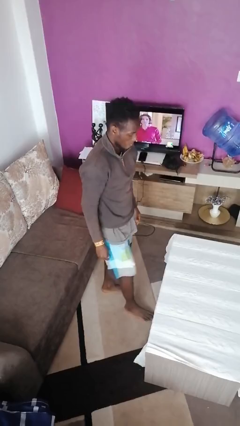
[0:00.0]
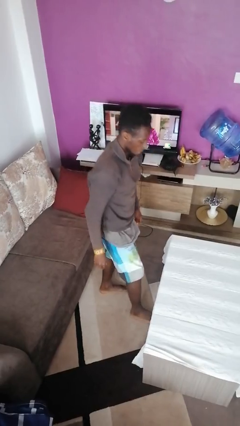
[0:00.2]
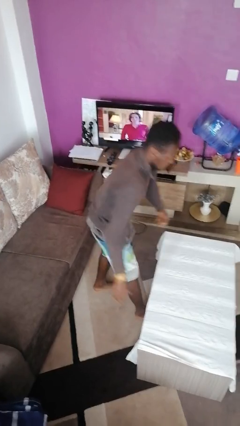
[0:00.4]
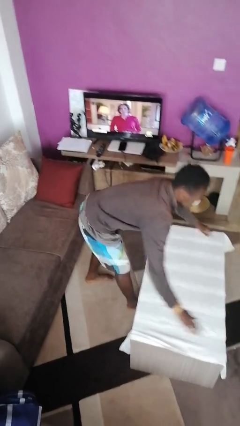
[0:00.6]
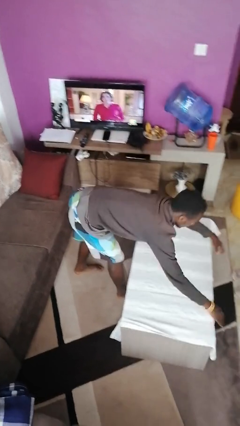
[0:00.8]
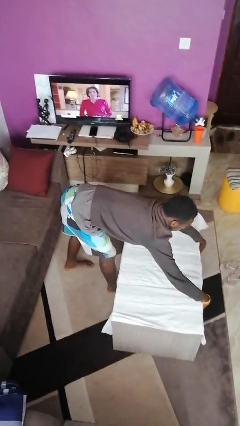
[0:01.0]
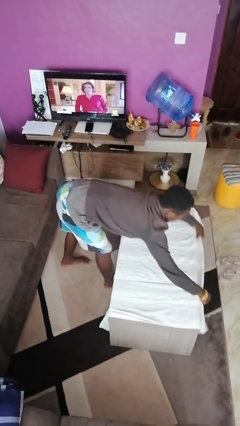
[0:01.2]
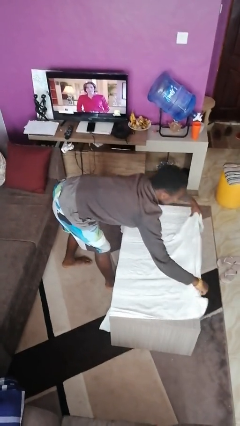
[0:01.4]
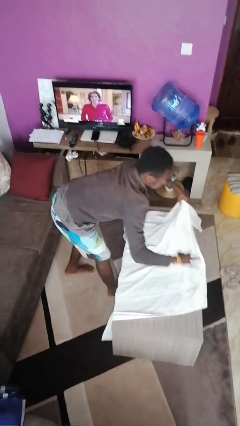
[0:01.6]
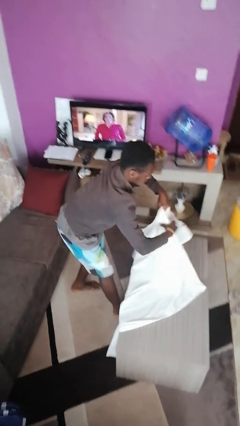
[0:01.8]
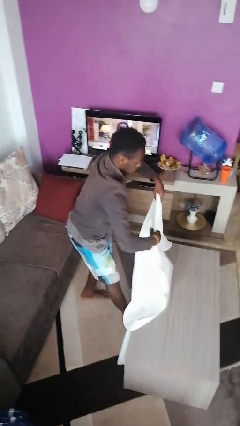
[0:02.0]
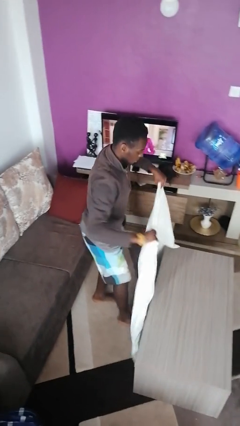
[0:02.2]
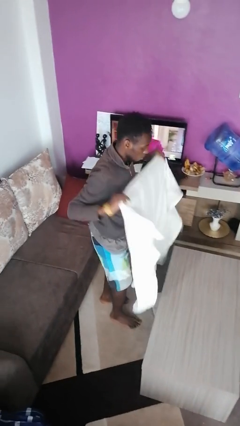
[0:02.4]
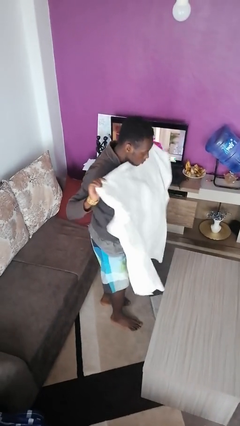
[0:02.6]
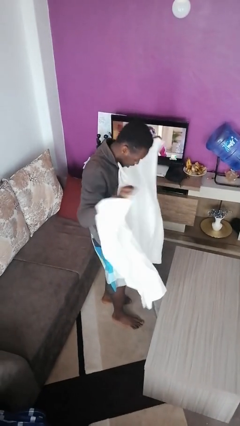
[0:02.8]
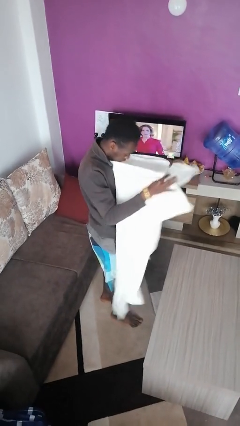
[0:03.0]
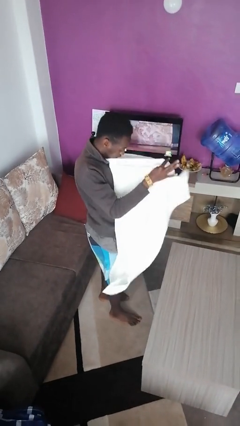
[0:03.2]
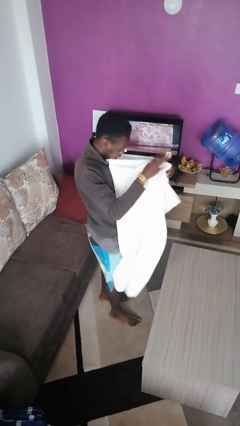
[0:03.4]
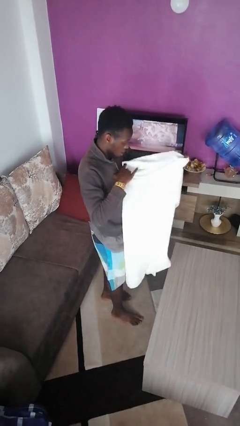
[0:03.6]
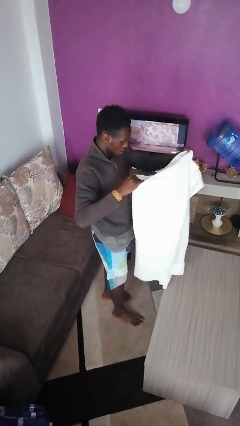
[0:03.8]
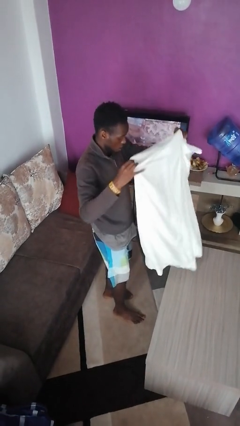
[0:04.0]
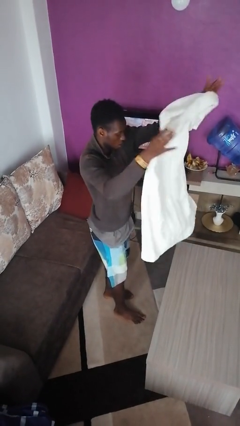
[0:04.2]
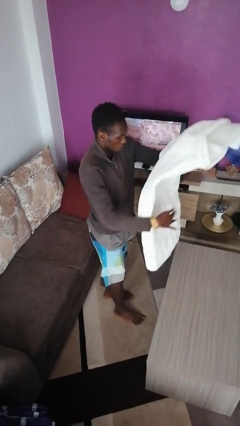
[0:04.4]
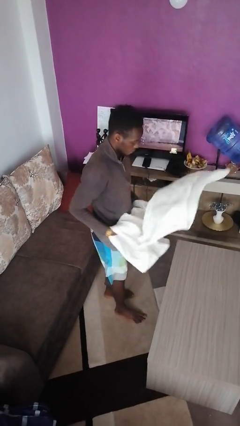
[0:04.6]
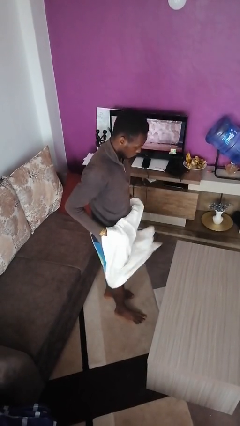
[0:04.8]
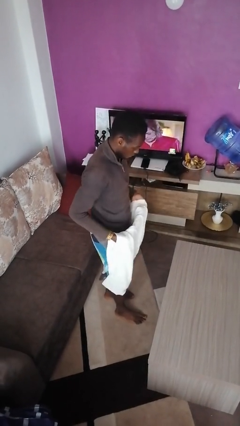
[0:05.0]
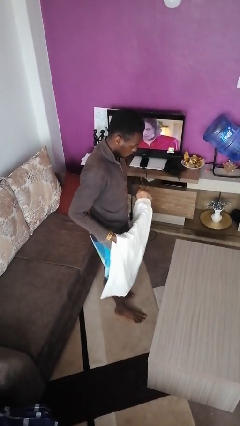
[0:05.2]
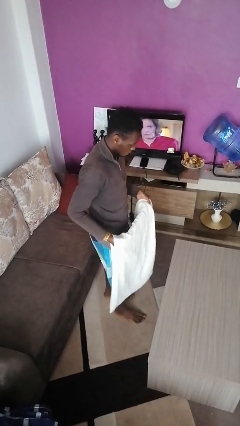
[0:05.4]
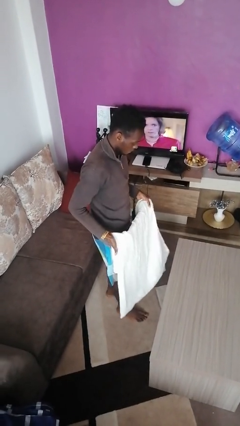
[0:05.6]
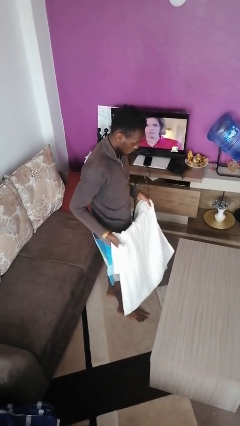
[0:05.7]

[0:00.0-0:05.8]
person folds tablecloth

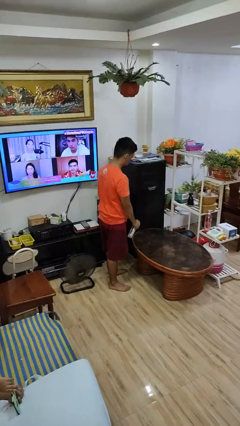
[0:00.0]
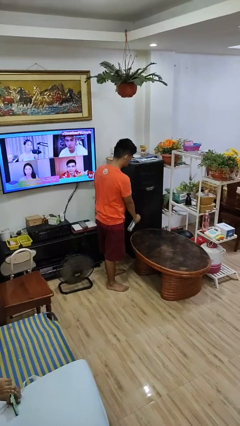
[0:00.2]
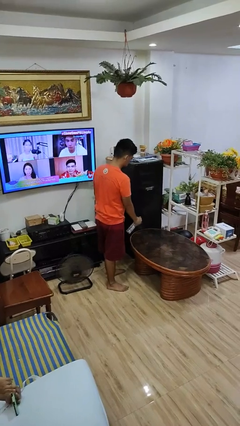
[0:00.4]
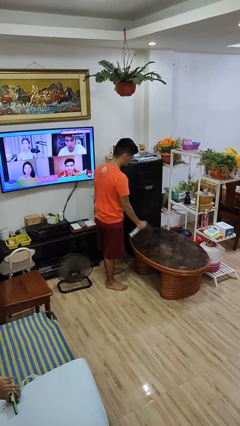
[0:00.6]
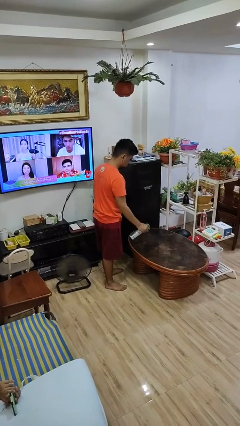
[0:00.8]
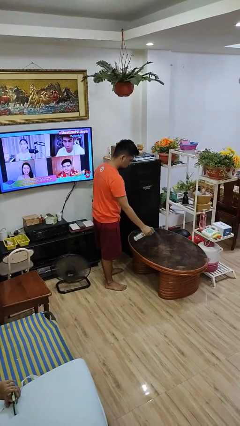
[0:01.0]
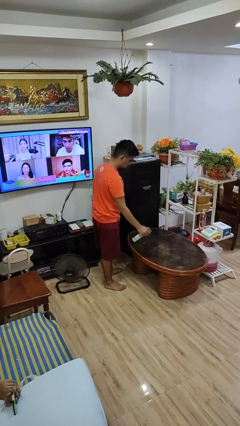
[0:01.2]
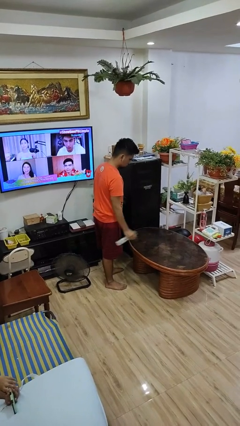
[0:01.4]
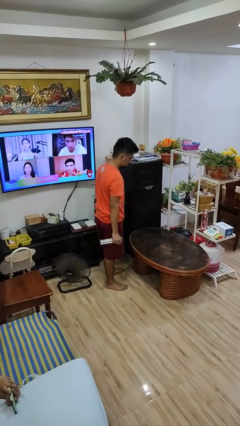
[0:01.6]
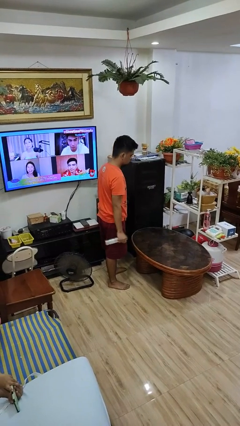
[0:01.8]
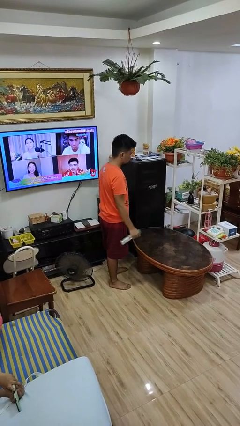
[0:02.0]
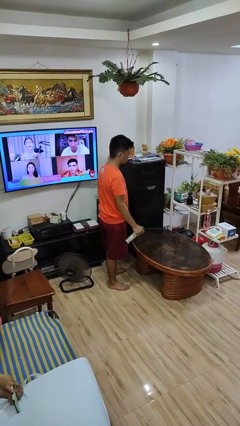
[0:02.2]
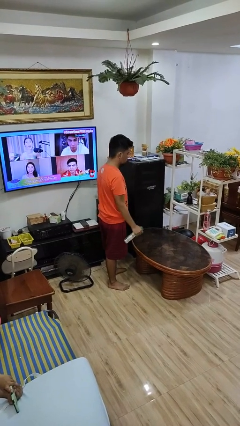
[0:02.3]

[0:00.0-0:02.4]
person sprays from bottle

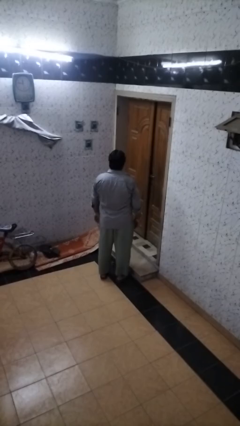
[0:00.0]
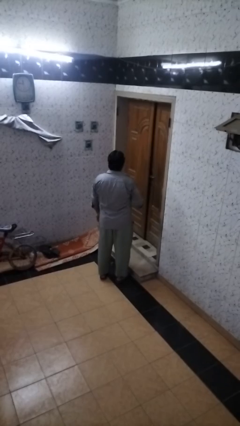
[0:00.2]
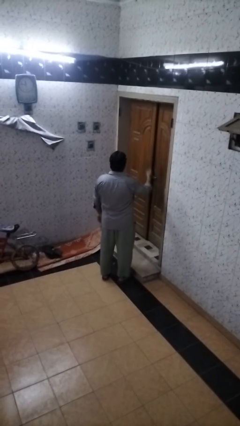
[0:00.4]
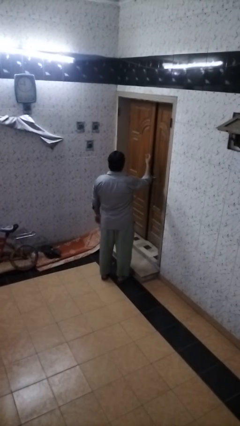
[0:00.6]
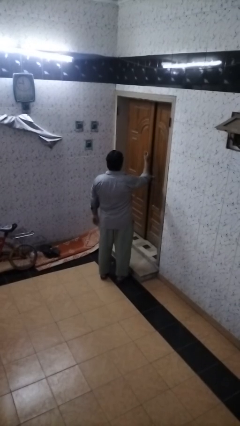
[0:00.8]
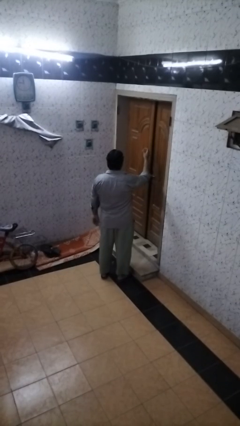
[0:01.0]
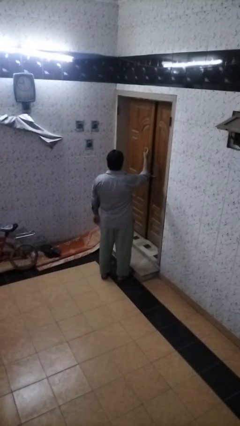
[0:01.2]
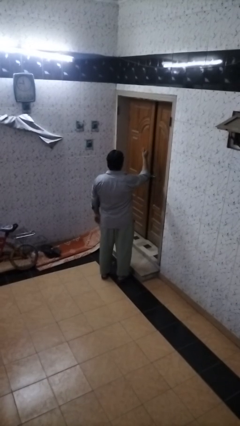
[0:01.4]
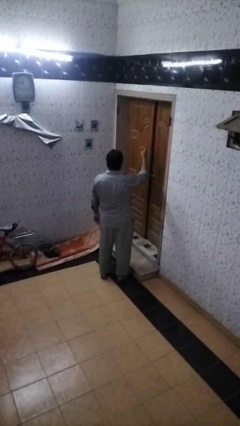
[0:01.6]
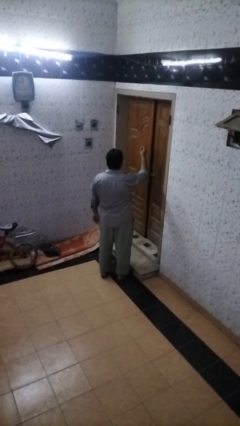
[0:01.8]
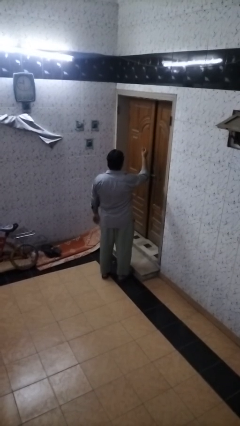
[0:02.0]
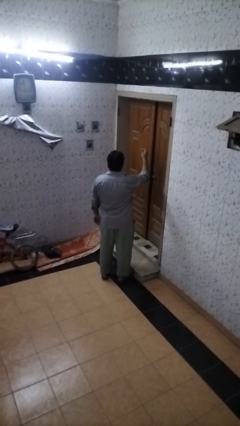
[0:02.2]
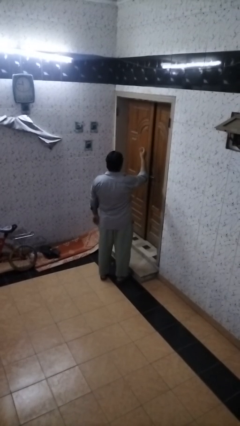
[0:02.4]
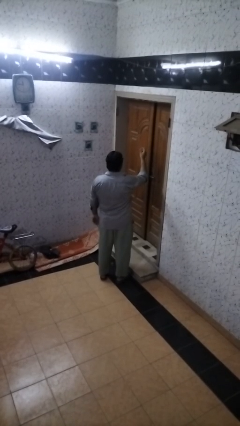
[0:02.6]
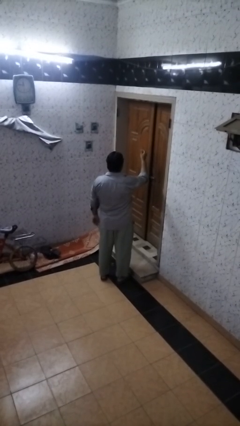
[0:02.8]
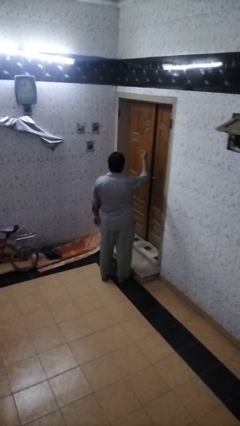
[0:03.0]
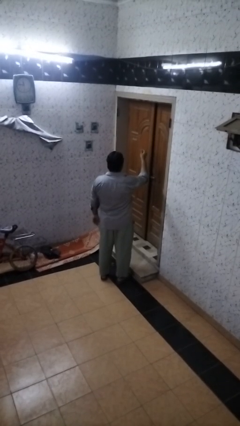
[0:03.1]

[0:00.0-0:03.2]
person snaps fingers

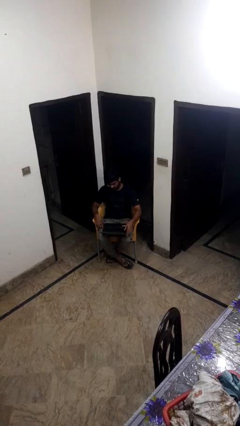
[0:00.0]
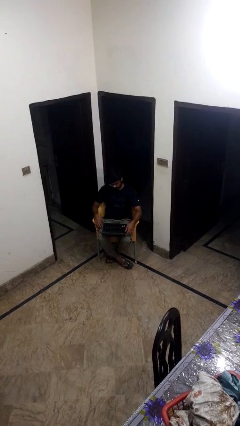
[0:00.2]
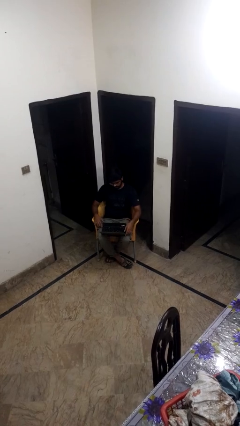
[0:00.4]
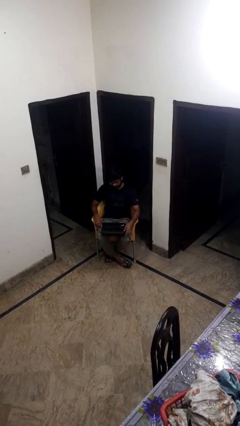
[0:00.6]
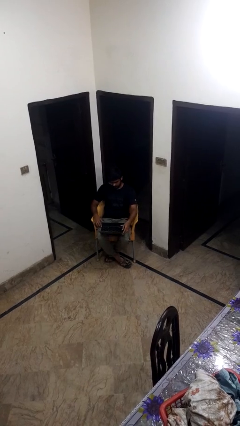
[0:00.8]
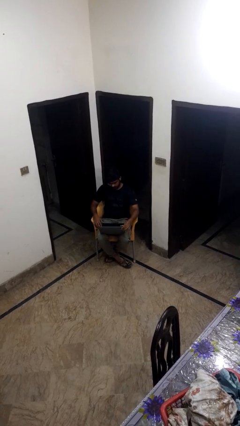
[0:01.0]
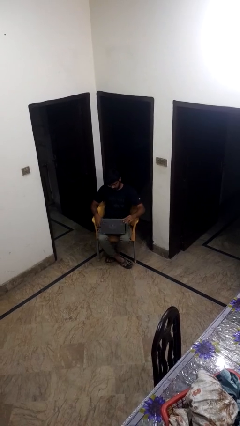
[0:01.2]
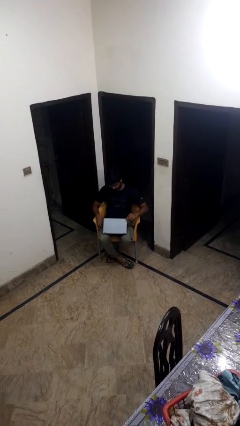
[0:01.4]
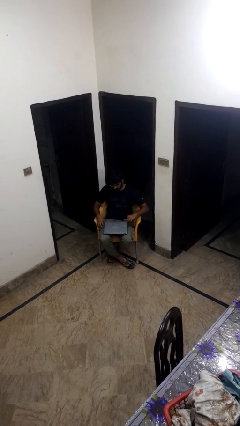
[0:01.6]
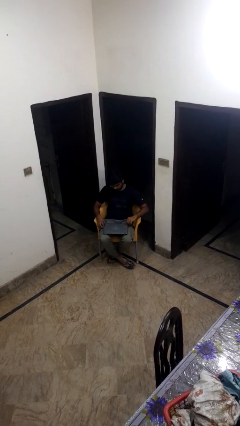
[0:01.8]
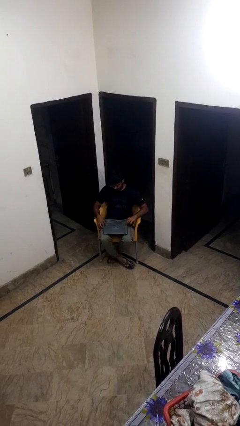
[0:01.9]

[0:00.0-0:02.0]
person closes laptop

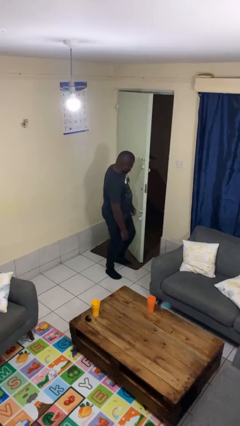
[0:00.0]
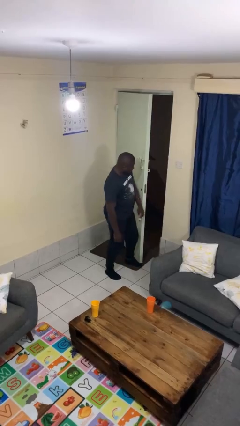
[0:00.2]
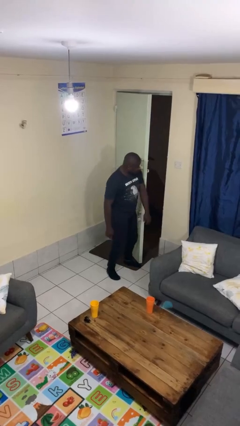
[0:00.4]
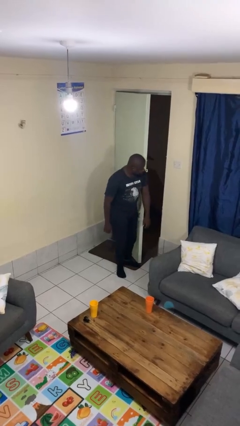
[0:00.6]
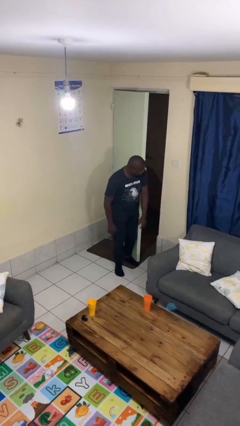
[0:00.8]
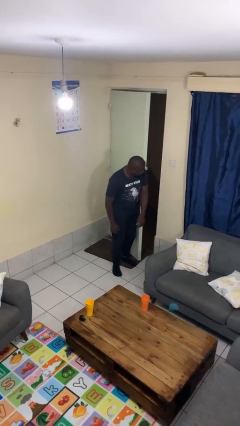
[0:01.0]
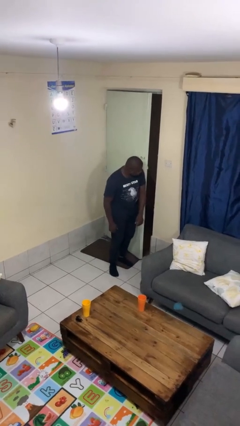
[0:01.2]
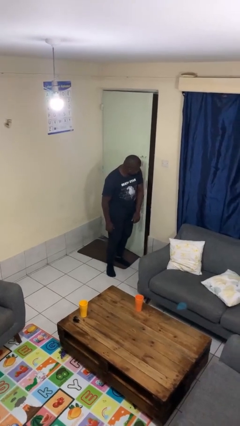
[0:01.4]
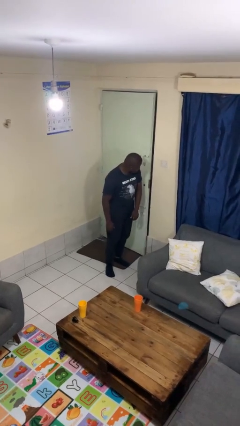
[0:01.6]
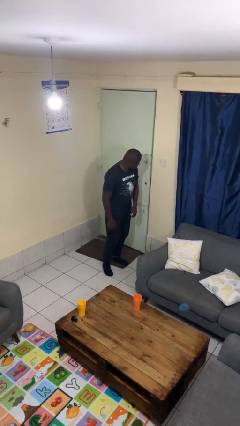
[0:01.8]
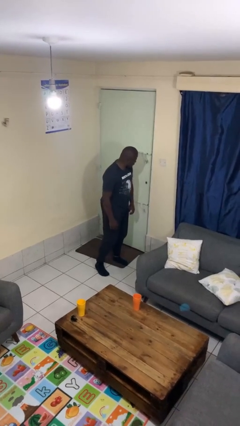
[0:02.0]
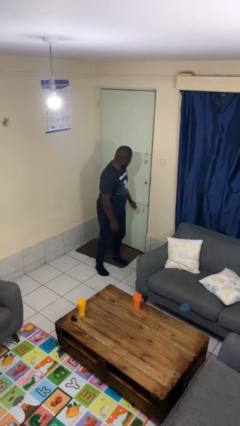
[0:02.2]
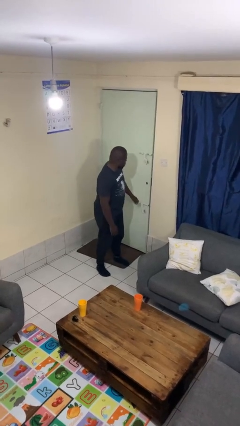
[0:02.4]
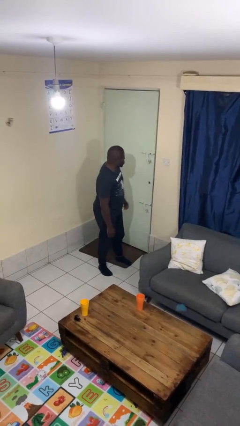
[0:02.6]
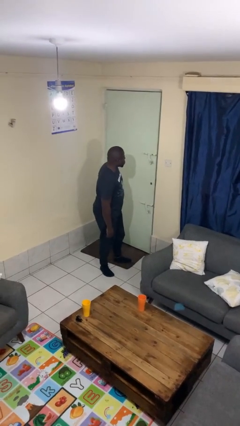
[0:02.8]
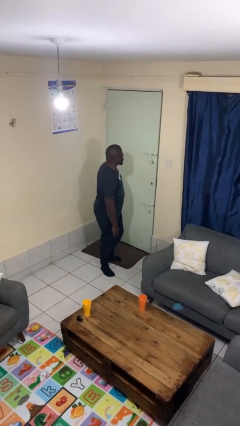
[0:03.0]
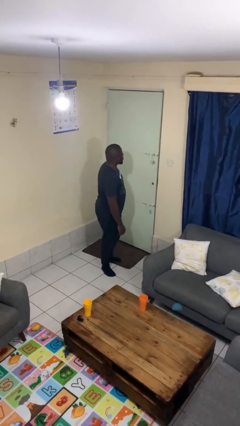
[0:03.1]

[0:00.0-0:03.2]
person closes door with hip

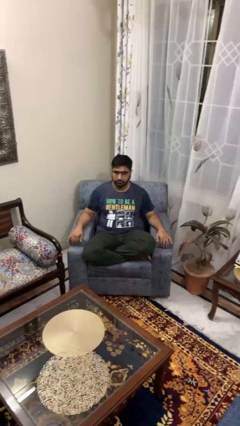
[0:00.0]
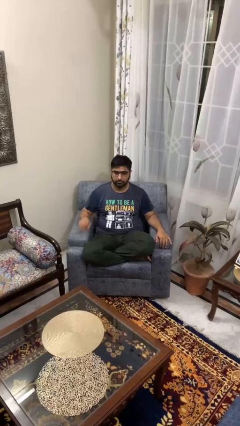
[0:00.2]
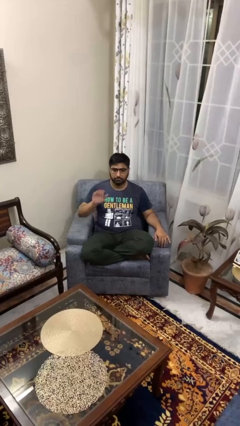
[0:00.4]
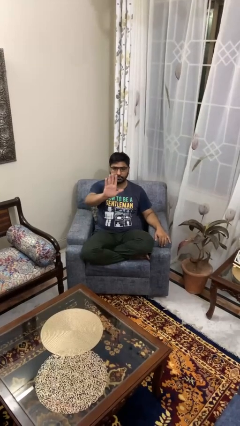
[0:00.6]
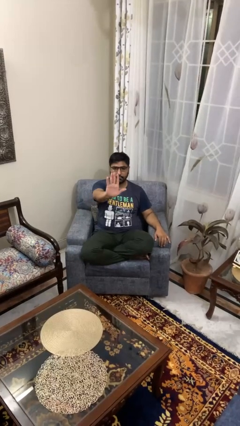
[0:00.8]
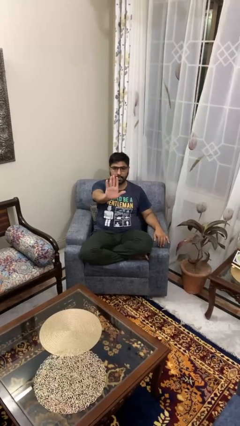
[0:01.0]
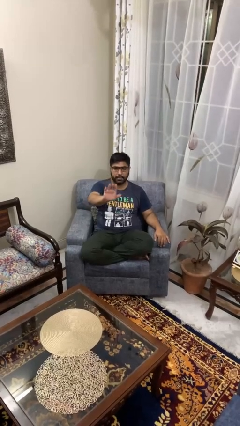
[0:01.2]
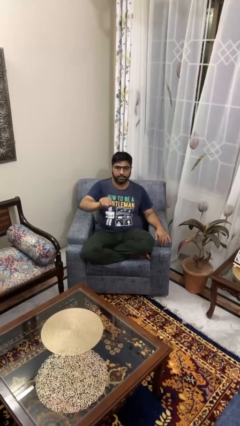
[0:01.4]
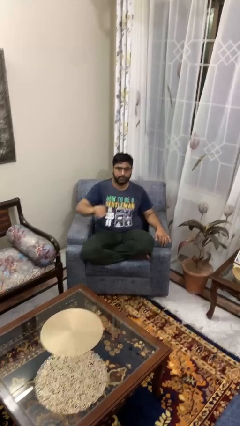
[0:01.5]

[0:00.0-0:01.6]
person gestures stop
